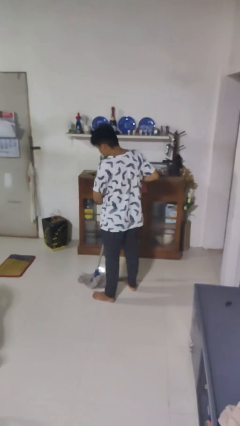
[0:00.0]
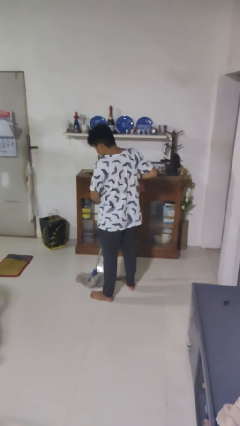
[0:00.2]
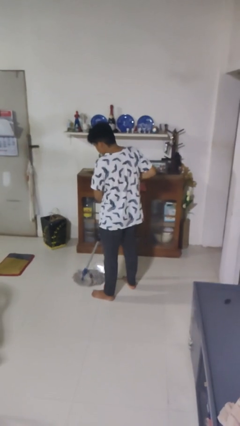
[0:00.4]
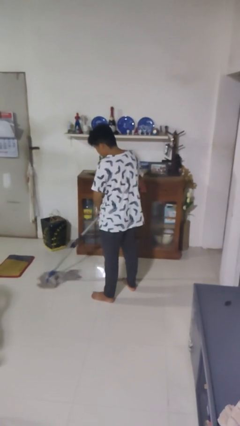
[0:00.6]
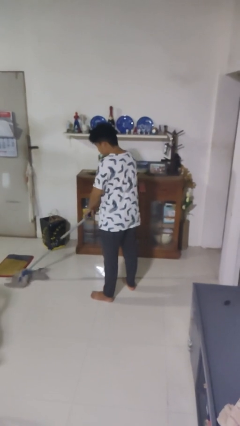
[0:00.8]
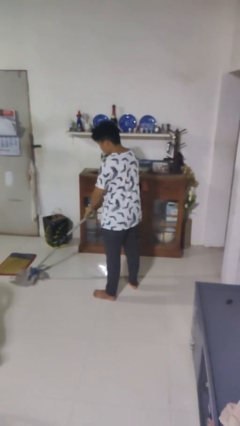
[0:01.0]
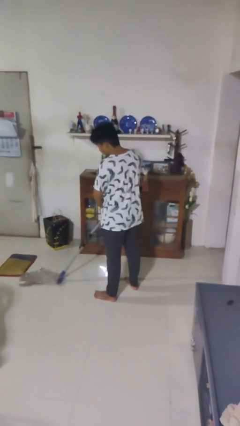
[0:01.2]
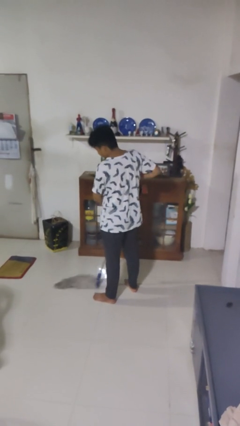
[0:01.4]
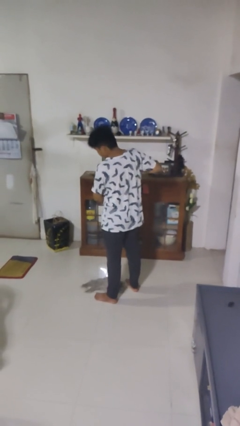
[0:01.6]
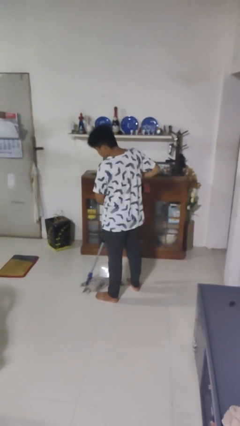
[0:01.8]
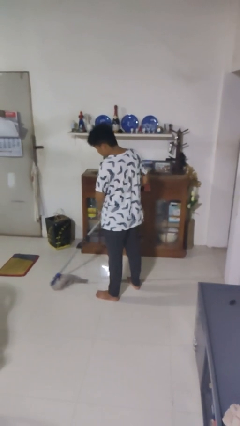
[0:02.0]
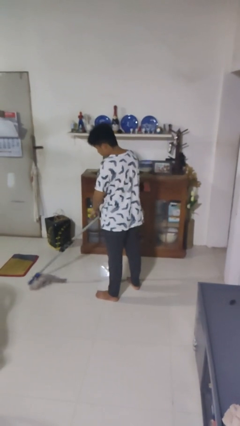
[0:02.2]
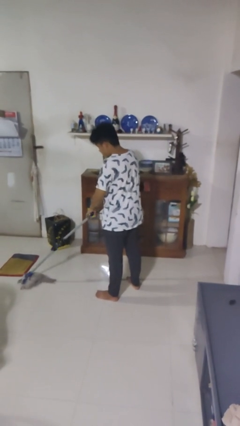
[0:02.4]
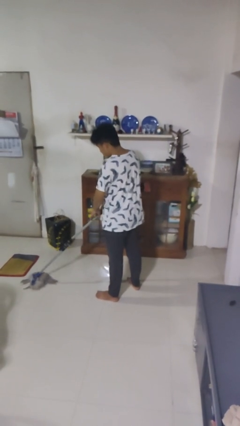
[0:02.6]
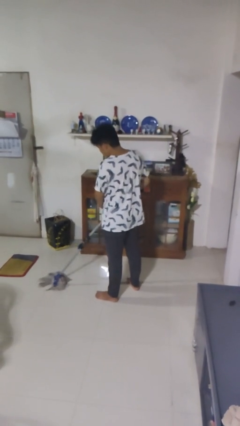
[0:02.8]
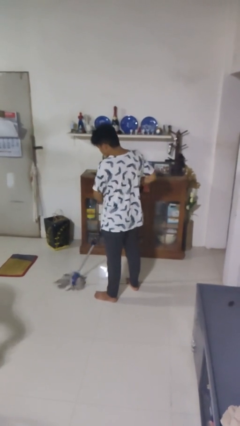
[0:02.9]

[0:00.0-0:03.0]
person mops

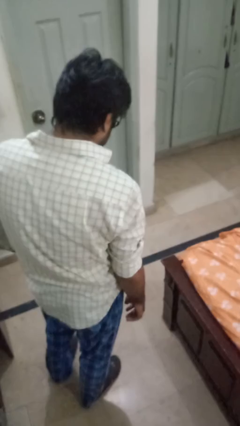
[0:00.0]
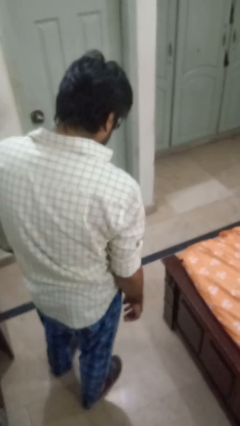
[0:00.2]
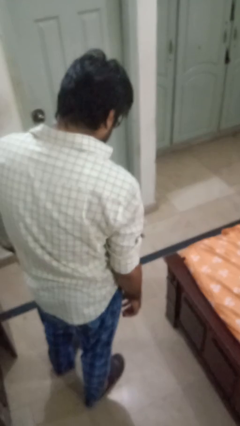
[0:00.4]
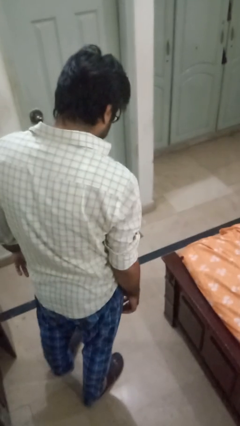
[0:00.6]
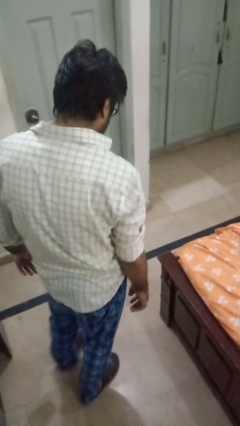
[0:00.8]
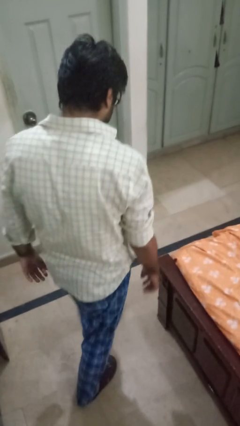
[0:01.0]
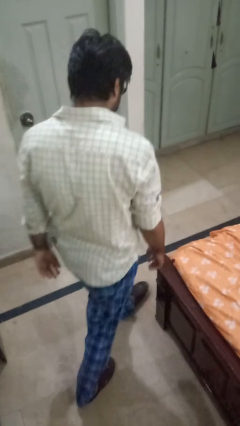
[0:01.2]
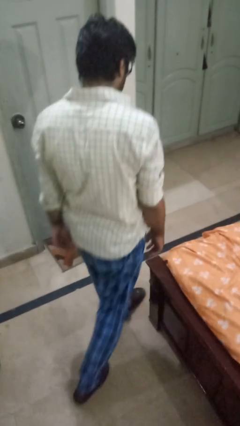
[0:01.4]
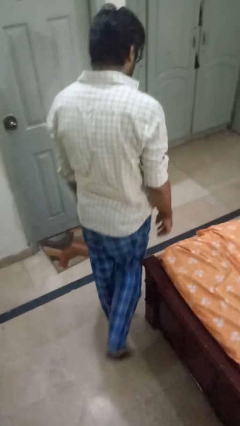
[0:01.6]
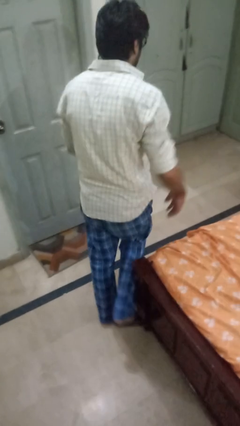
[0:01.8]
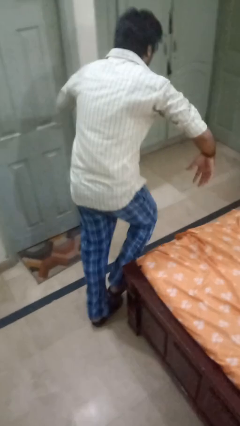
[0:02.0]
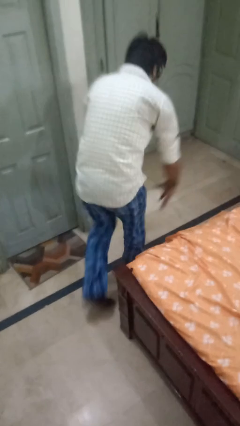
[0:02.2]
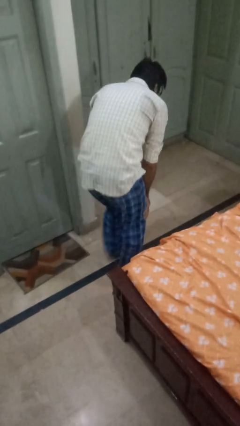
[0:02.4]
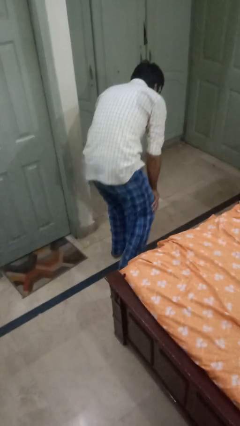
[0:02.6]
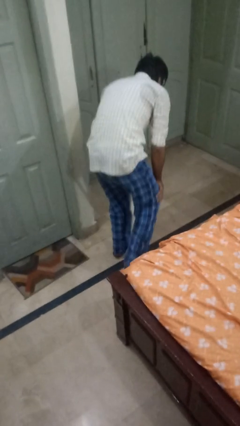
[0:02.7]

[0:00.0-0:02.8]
person trips on object on floor

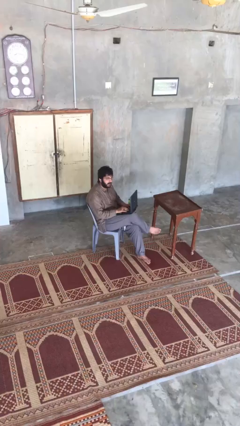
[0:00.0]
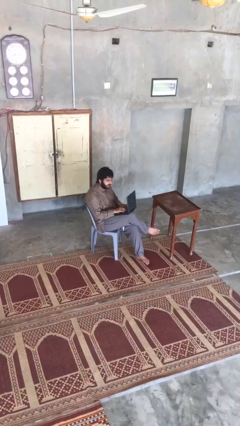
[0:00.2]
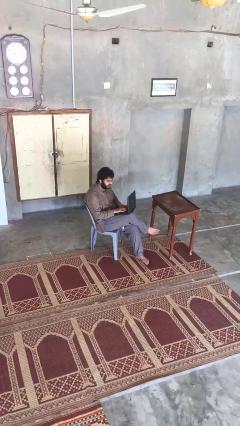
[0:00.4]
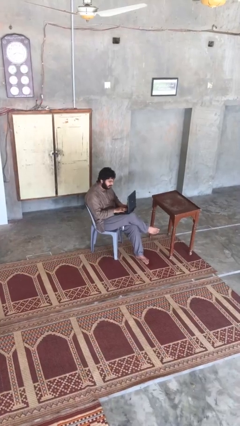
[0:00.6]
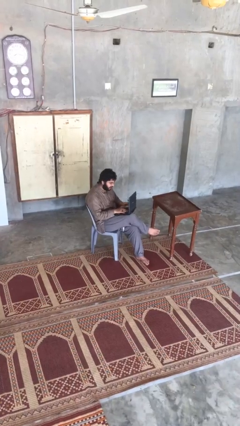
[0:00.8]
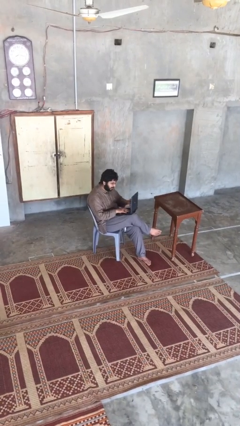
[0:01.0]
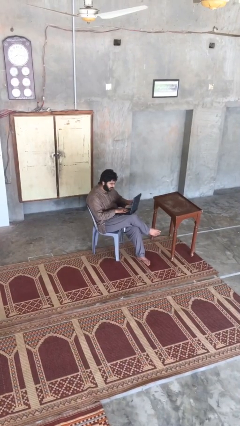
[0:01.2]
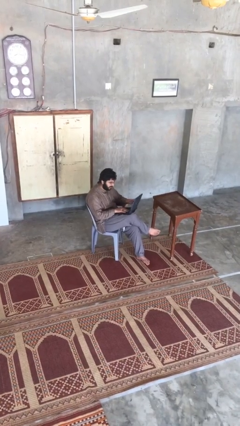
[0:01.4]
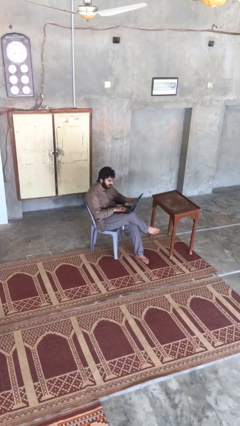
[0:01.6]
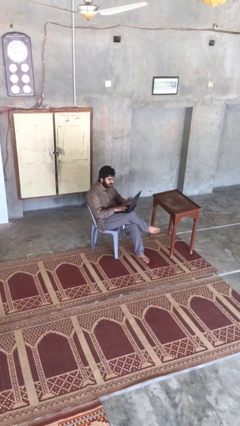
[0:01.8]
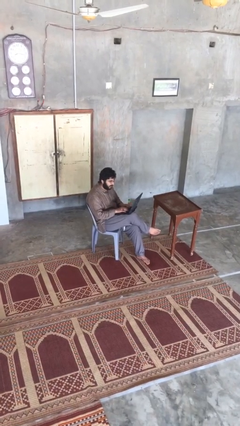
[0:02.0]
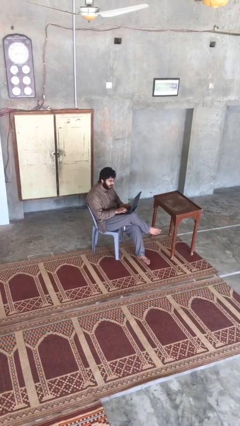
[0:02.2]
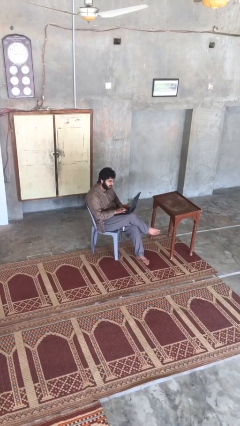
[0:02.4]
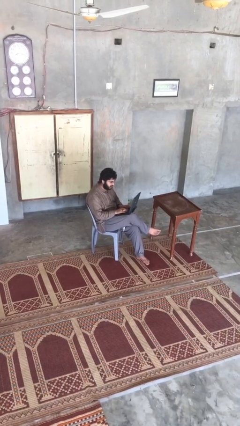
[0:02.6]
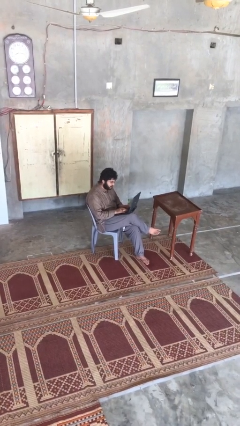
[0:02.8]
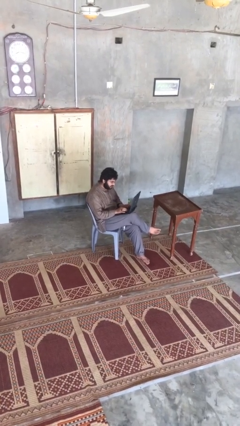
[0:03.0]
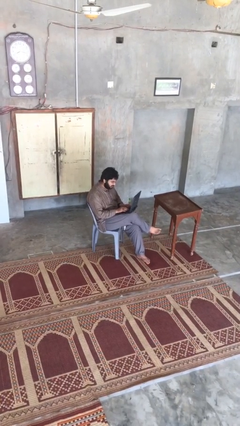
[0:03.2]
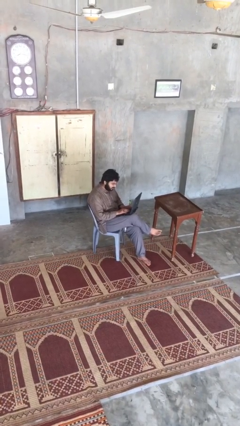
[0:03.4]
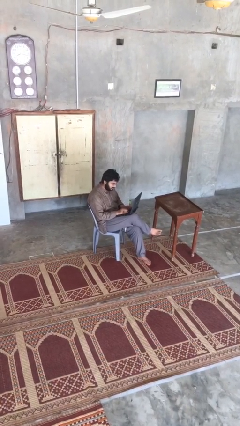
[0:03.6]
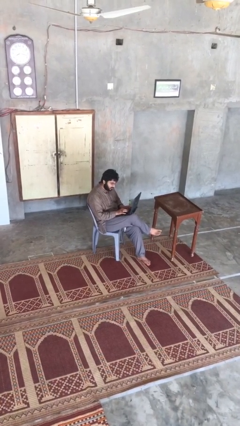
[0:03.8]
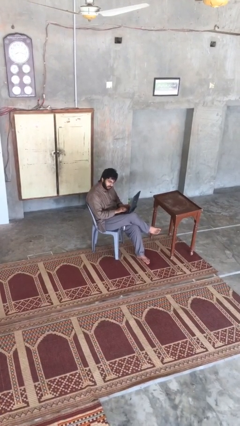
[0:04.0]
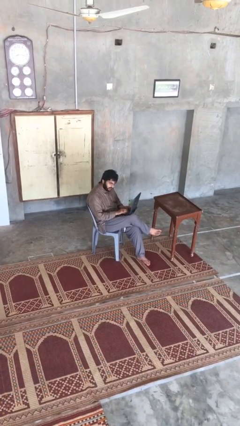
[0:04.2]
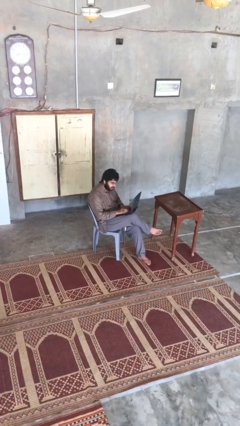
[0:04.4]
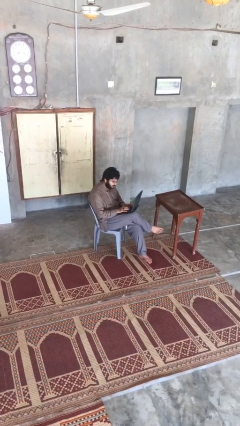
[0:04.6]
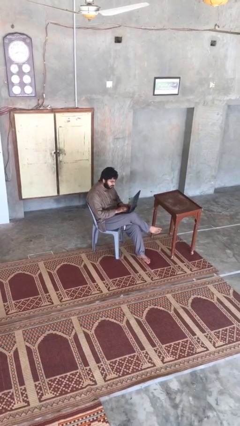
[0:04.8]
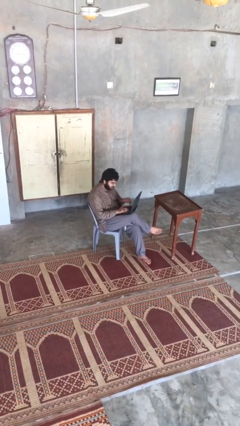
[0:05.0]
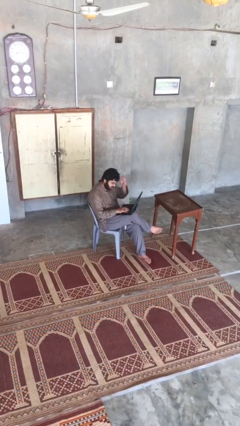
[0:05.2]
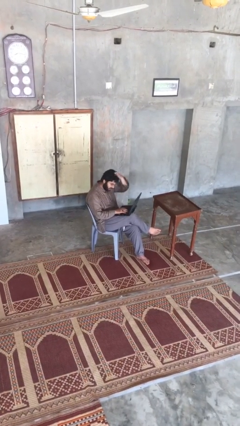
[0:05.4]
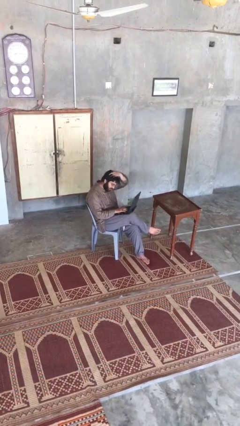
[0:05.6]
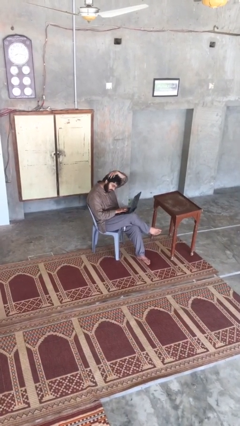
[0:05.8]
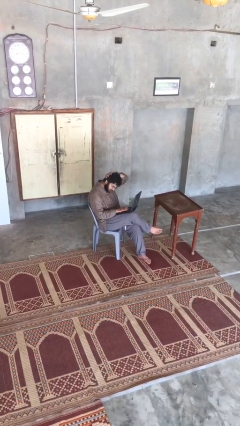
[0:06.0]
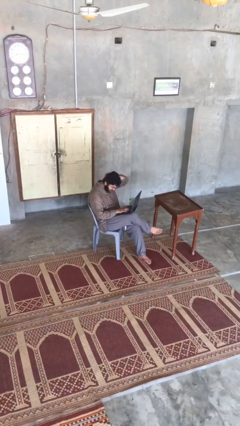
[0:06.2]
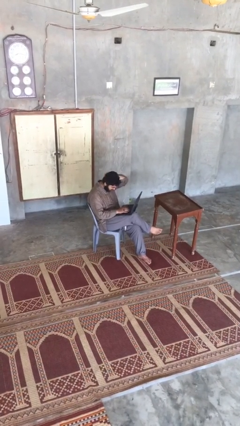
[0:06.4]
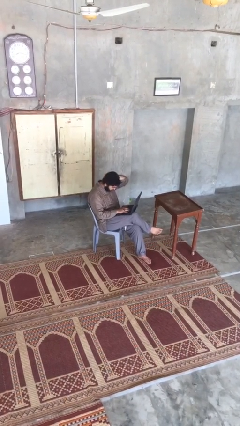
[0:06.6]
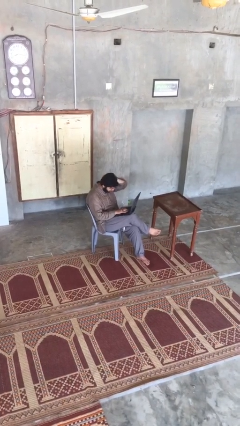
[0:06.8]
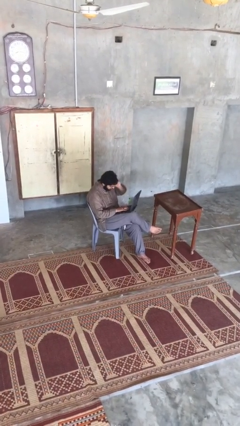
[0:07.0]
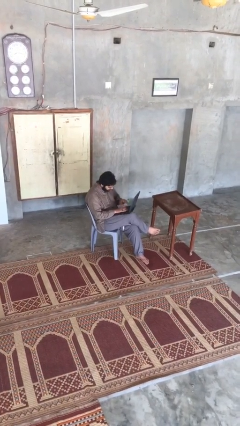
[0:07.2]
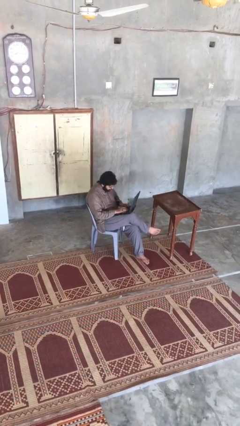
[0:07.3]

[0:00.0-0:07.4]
person interacts with laptop

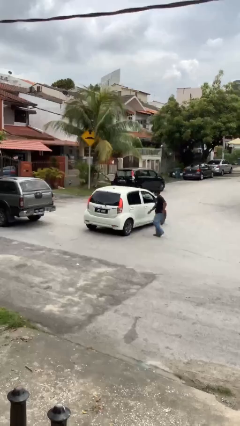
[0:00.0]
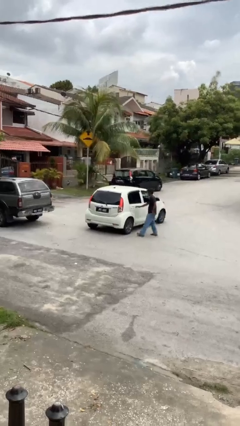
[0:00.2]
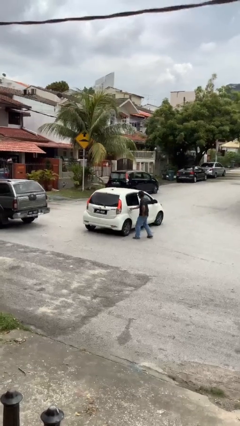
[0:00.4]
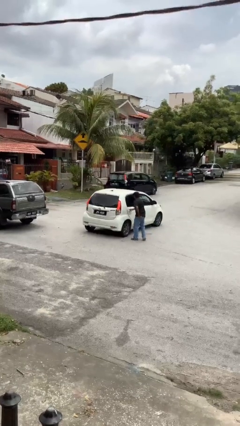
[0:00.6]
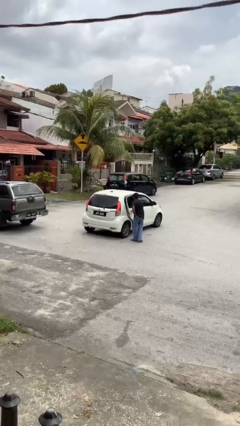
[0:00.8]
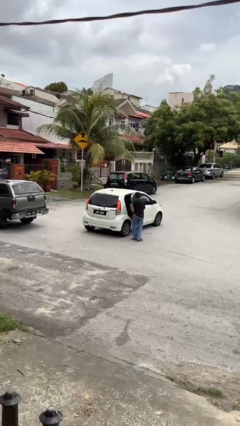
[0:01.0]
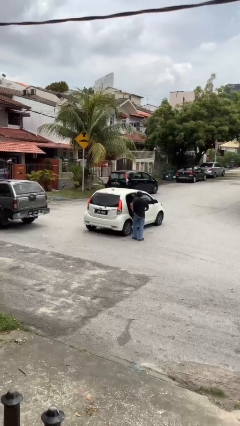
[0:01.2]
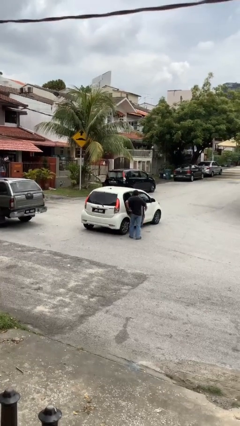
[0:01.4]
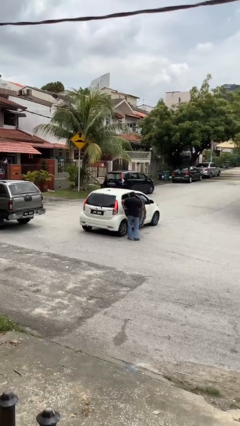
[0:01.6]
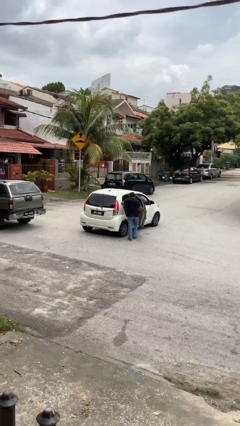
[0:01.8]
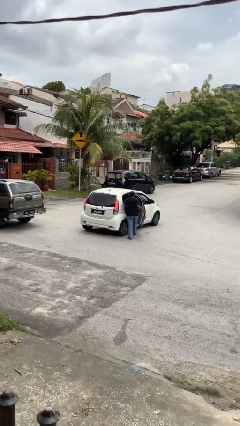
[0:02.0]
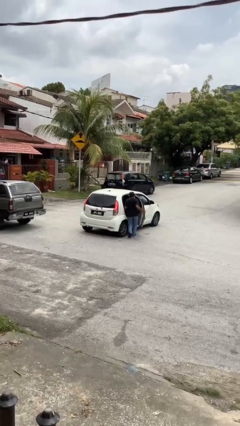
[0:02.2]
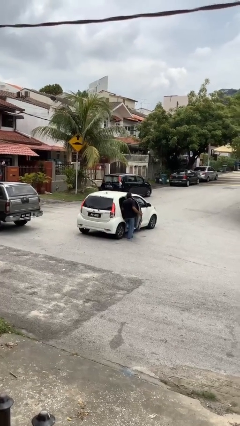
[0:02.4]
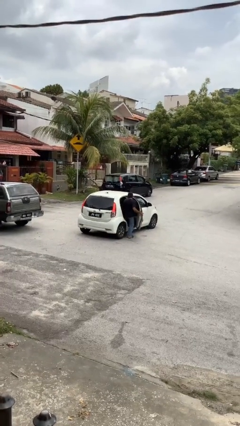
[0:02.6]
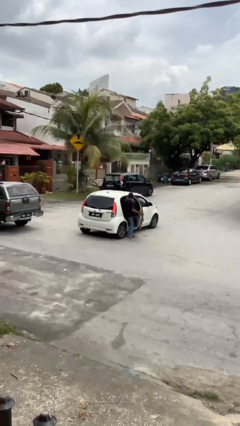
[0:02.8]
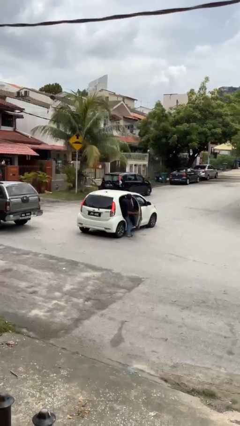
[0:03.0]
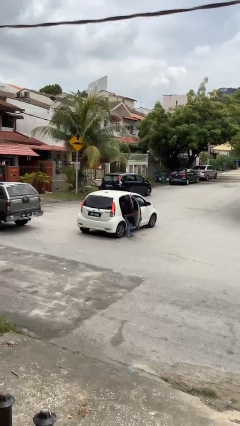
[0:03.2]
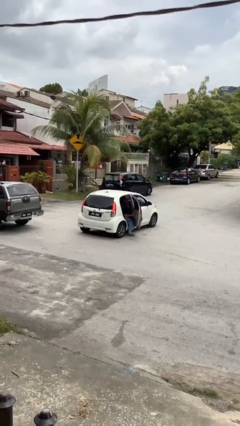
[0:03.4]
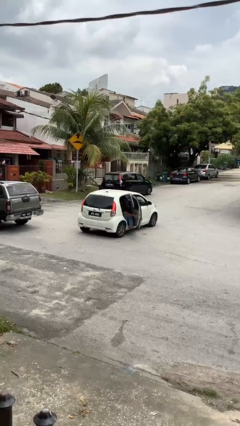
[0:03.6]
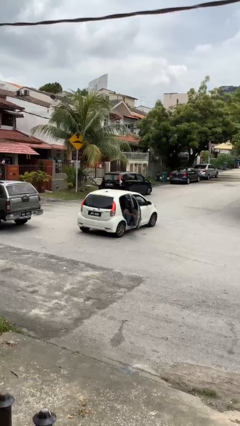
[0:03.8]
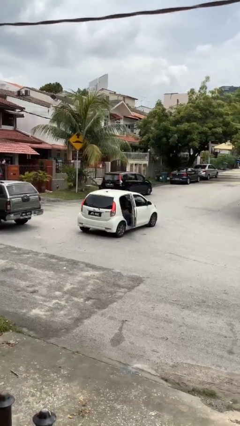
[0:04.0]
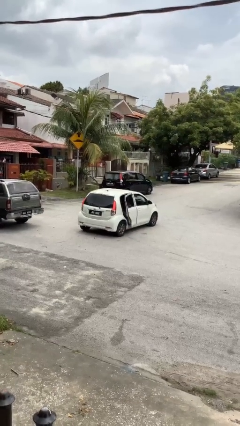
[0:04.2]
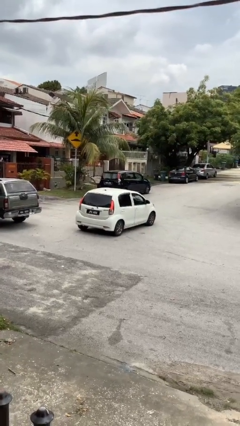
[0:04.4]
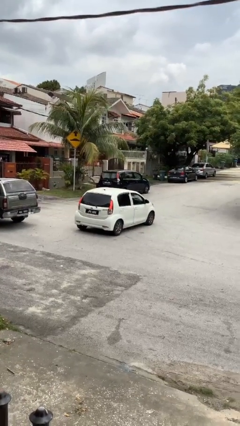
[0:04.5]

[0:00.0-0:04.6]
car picks up person
